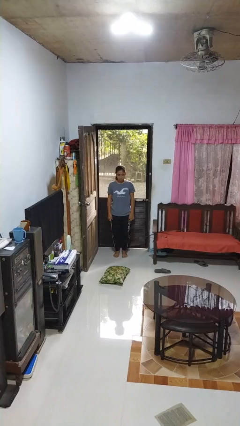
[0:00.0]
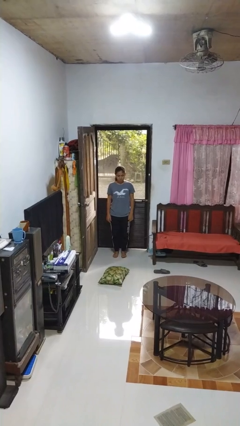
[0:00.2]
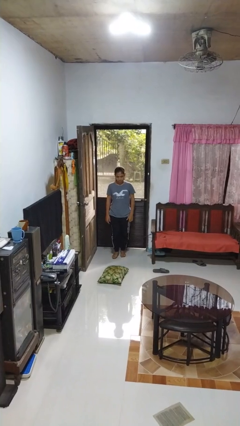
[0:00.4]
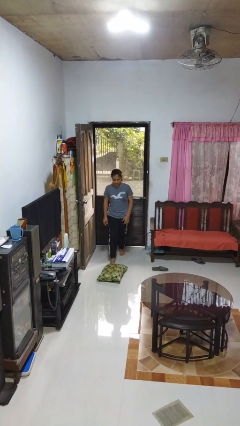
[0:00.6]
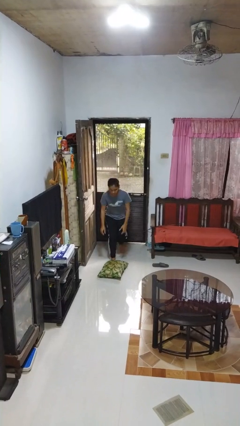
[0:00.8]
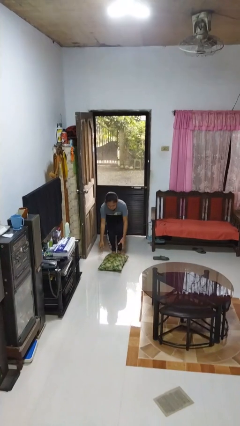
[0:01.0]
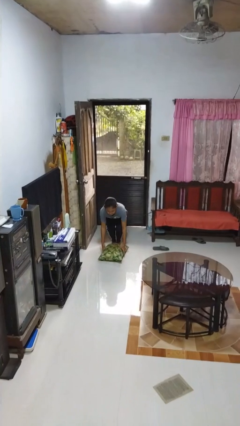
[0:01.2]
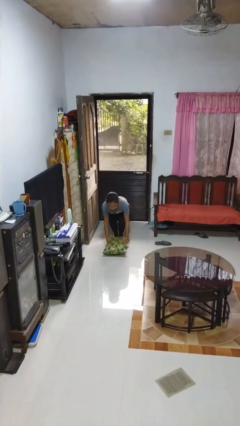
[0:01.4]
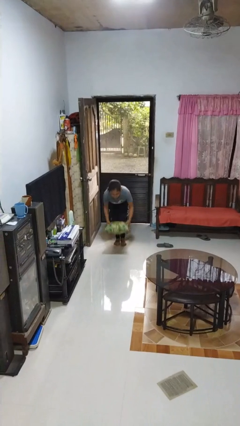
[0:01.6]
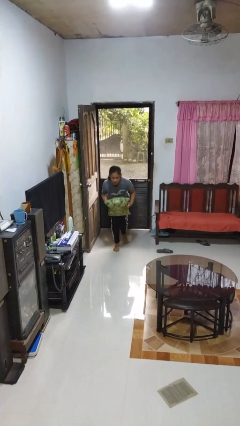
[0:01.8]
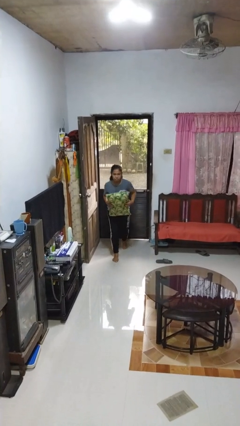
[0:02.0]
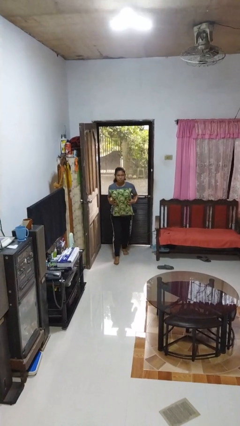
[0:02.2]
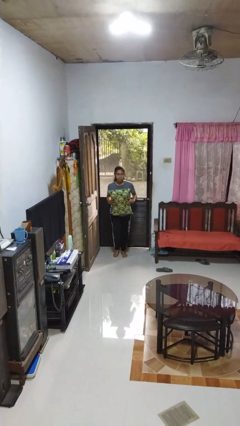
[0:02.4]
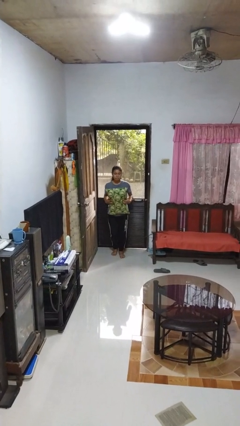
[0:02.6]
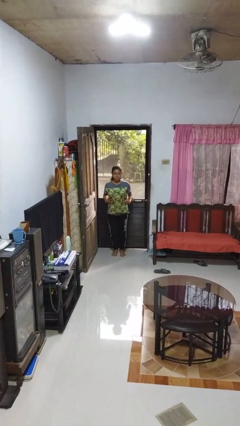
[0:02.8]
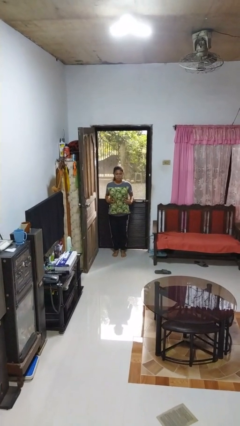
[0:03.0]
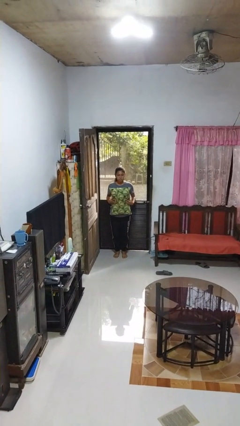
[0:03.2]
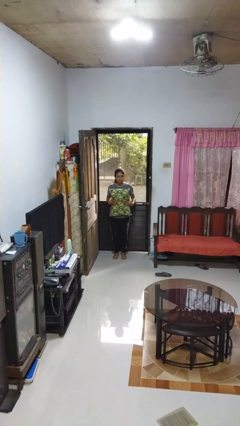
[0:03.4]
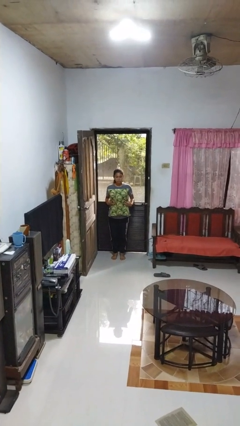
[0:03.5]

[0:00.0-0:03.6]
person picks up object from floor

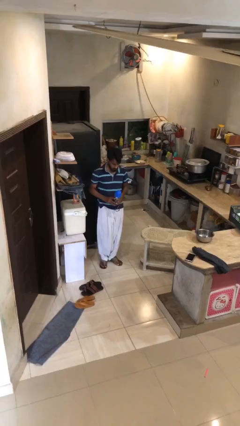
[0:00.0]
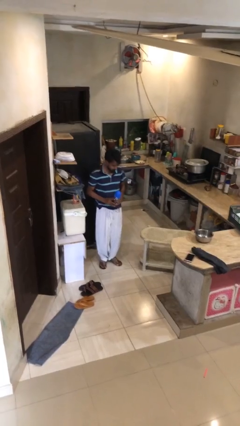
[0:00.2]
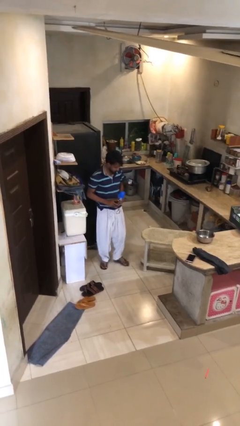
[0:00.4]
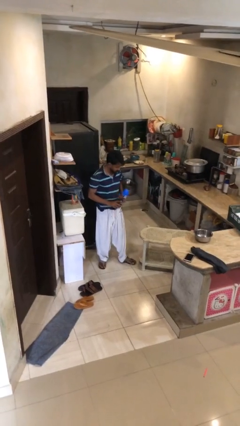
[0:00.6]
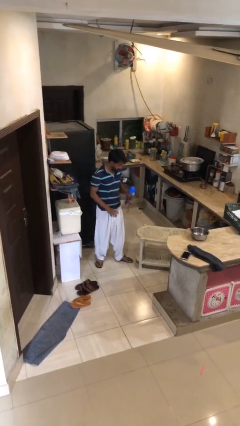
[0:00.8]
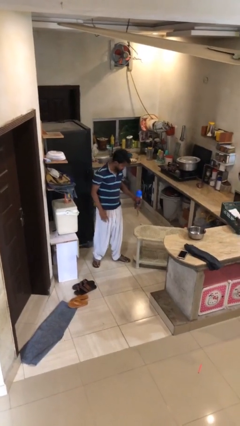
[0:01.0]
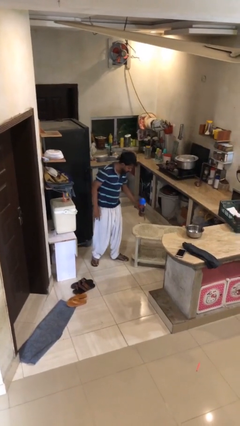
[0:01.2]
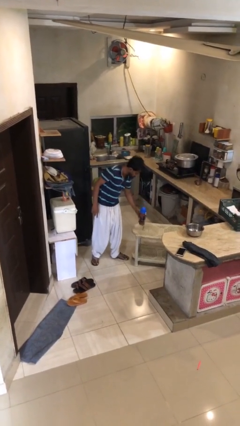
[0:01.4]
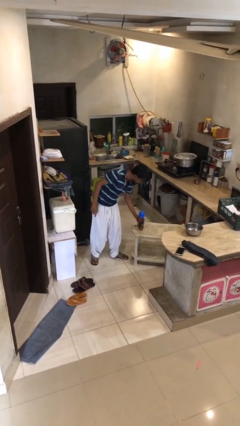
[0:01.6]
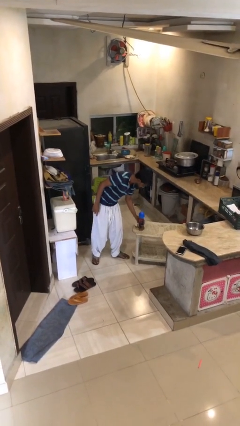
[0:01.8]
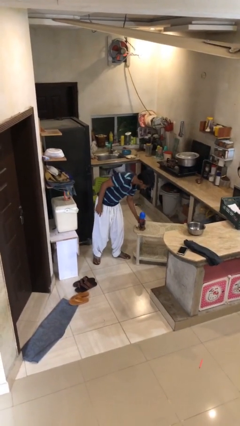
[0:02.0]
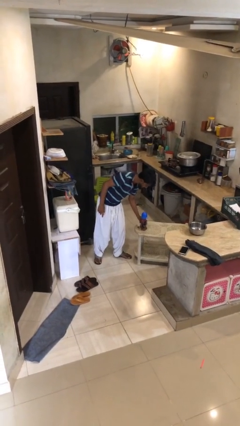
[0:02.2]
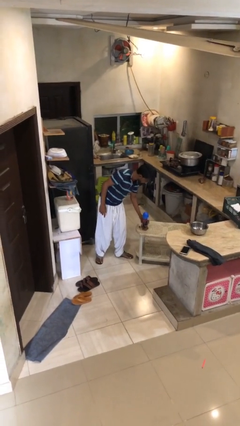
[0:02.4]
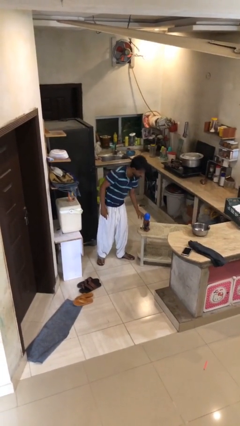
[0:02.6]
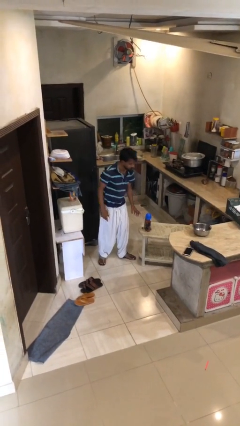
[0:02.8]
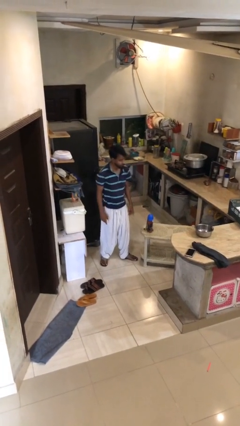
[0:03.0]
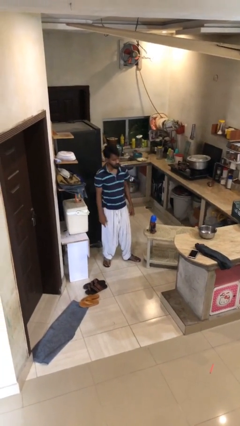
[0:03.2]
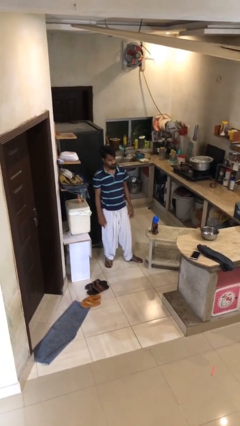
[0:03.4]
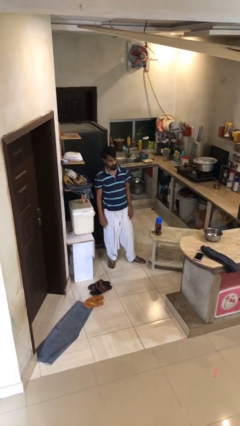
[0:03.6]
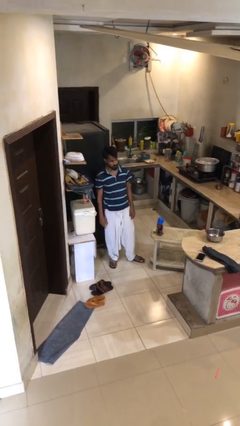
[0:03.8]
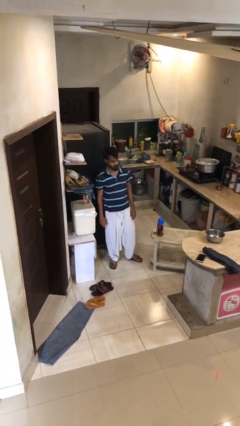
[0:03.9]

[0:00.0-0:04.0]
person puts down object on table

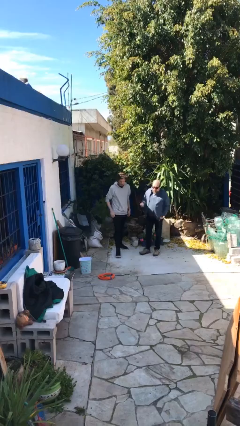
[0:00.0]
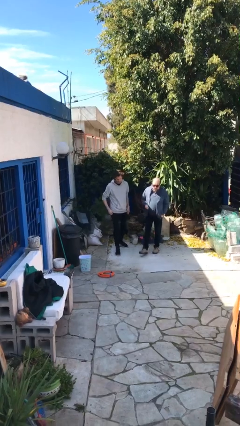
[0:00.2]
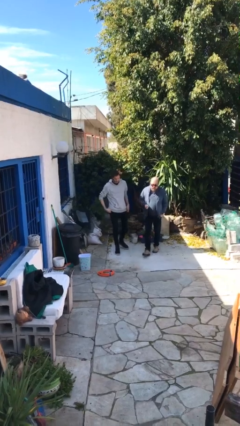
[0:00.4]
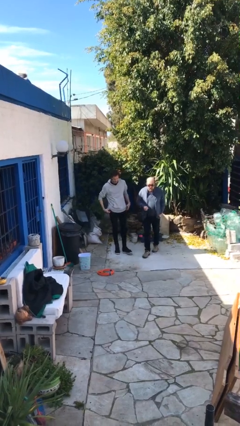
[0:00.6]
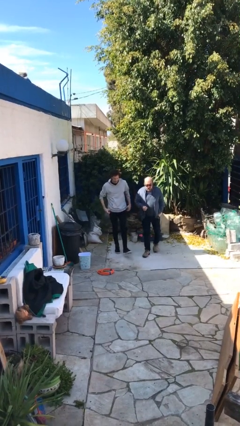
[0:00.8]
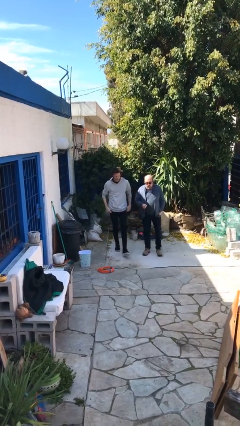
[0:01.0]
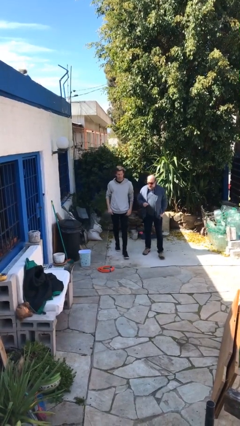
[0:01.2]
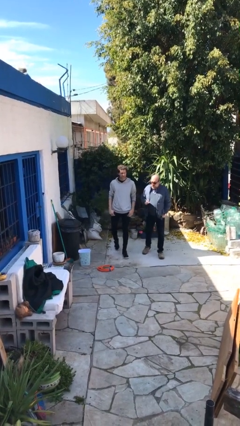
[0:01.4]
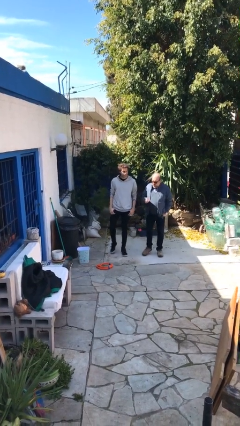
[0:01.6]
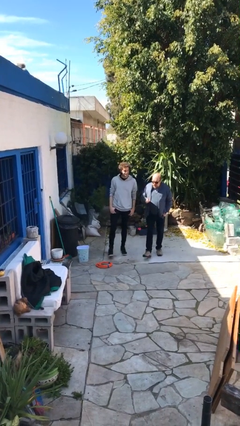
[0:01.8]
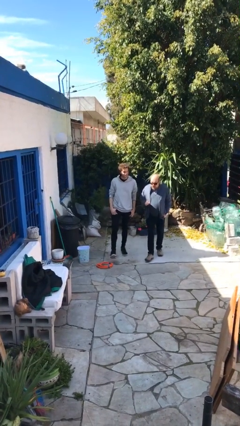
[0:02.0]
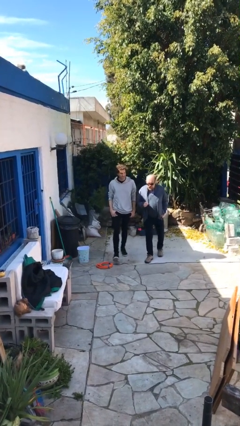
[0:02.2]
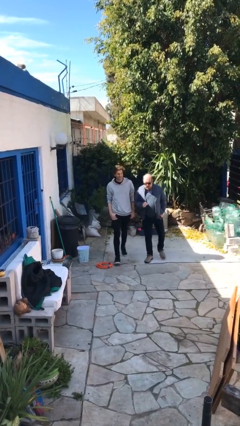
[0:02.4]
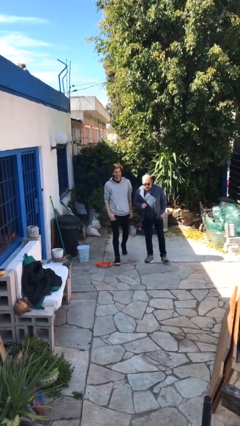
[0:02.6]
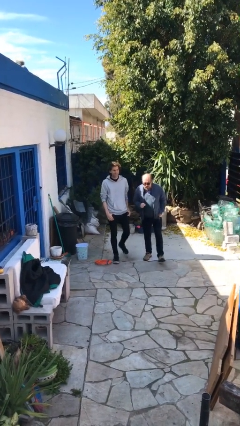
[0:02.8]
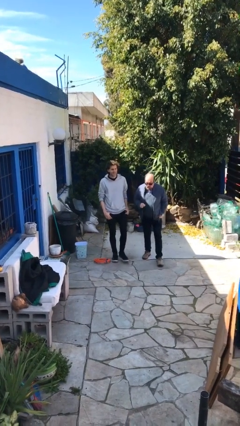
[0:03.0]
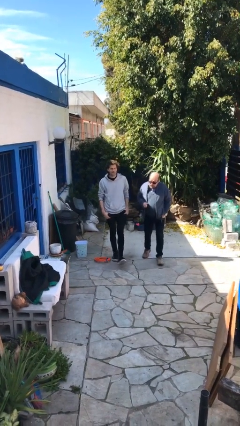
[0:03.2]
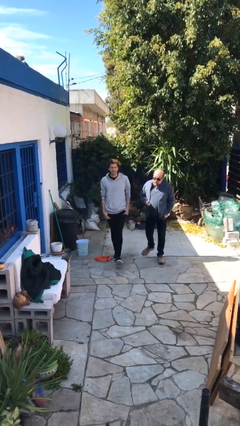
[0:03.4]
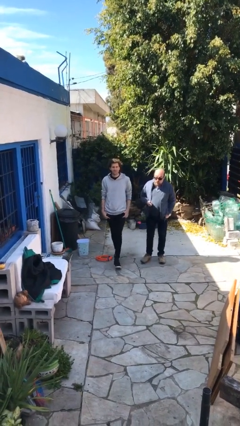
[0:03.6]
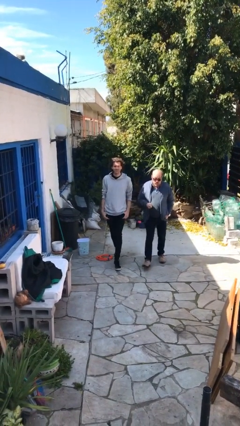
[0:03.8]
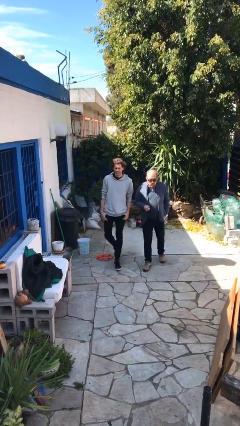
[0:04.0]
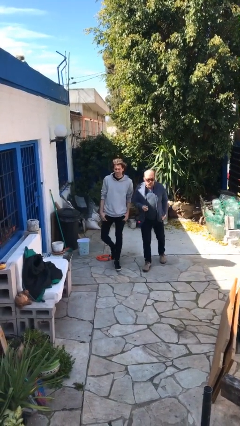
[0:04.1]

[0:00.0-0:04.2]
person talks to person

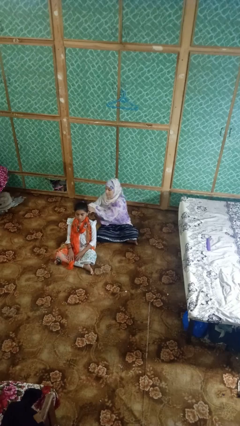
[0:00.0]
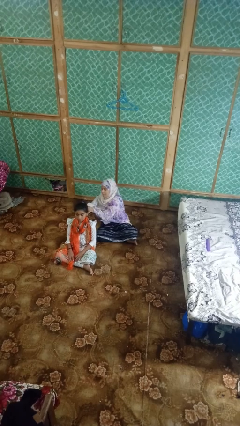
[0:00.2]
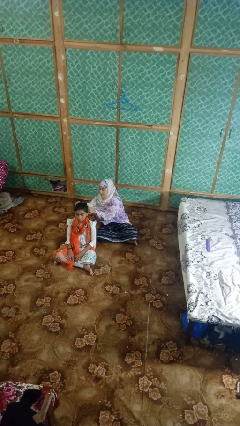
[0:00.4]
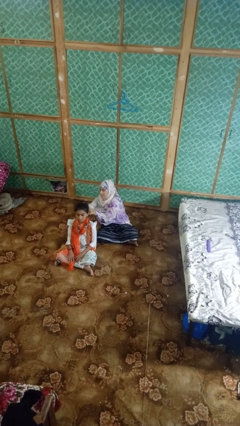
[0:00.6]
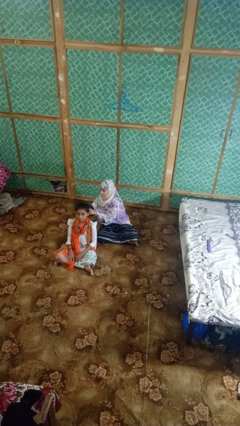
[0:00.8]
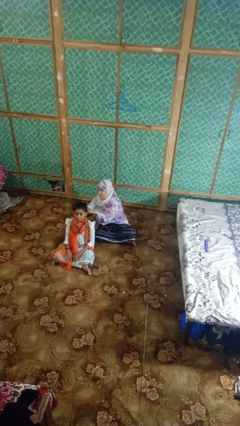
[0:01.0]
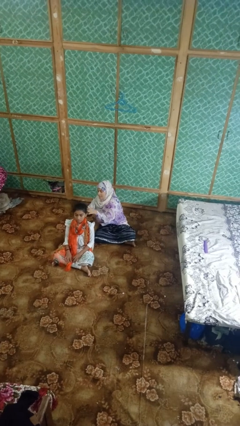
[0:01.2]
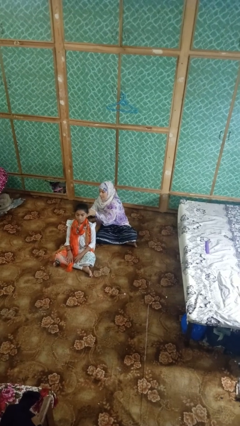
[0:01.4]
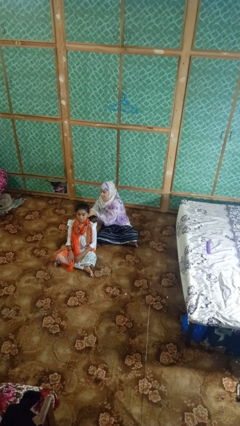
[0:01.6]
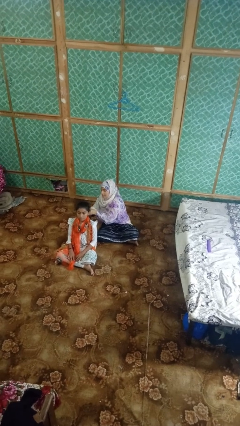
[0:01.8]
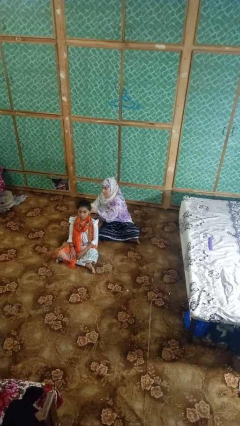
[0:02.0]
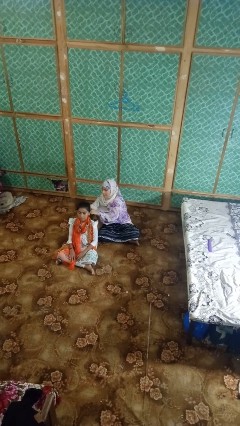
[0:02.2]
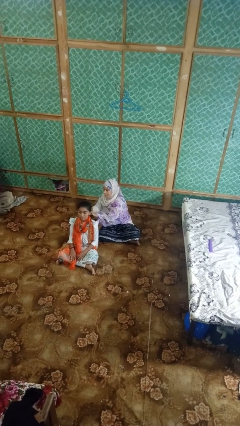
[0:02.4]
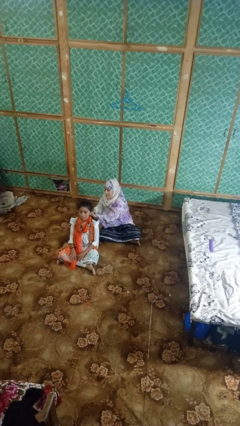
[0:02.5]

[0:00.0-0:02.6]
person braids hair of person

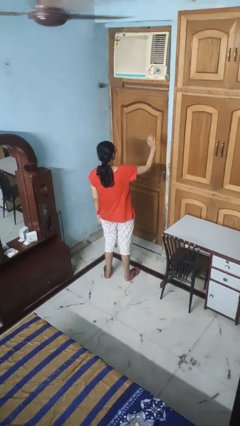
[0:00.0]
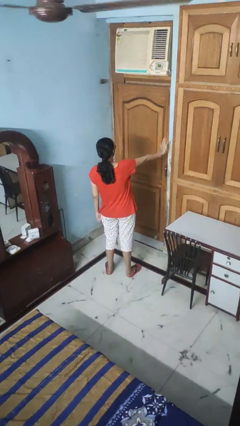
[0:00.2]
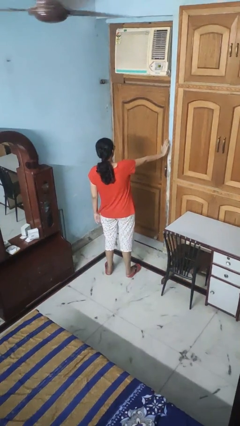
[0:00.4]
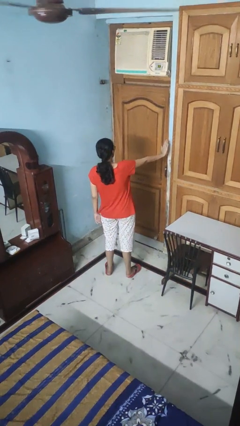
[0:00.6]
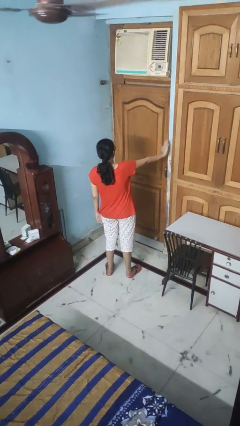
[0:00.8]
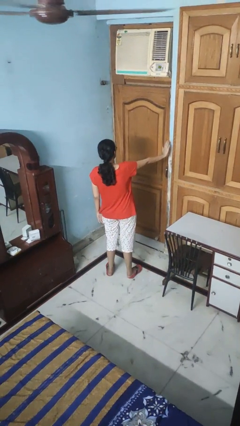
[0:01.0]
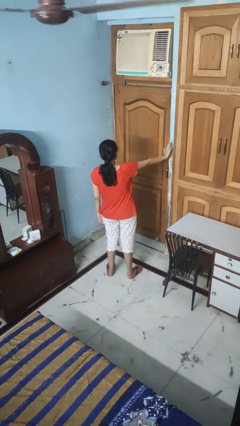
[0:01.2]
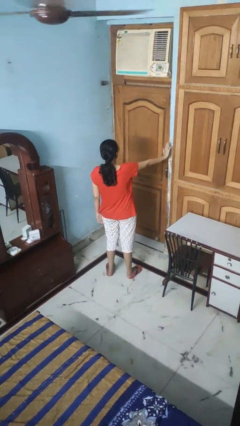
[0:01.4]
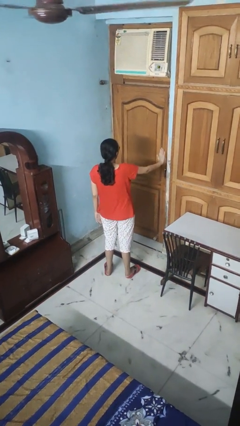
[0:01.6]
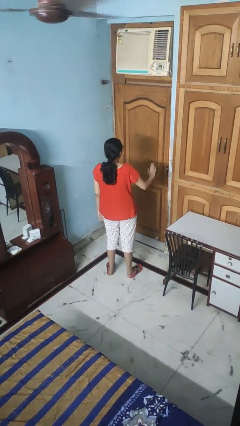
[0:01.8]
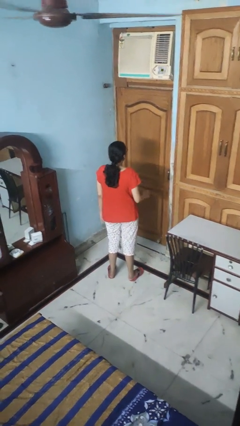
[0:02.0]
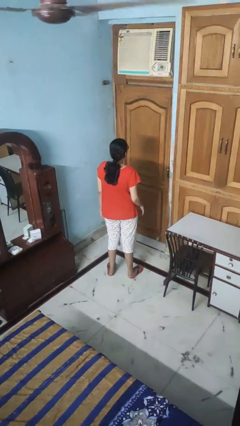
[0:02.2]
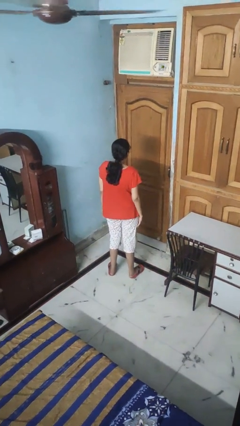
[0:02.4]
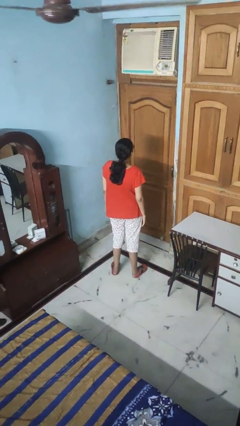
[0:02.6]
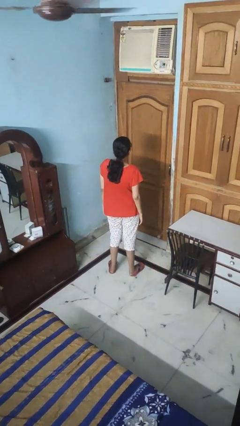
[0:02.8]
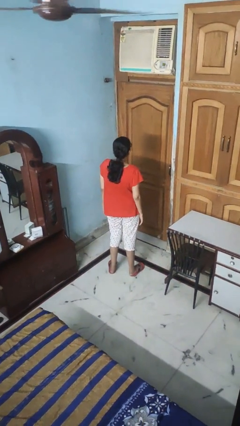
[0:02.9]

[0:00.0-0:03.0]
person gestures stop

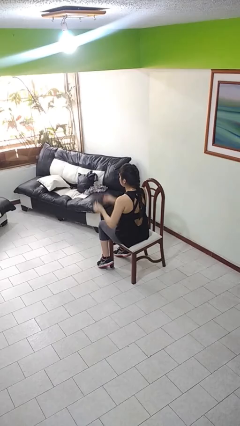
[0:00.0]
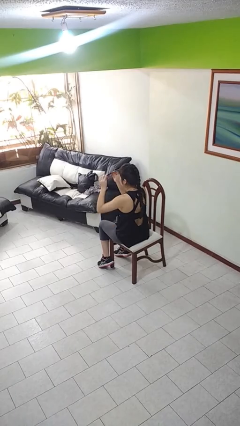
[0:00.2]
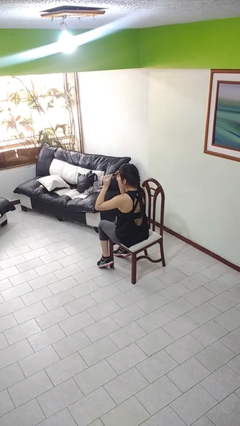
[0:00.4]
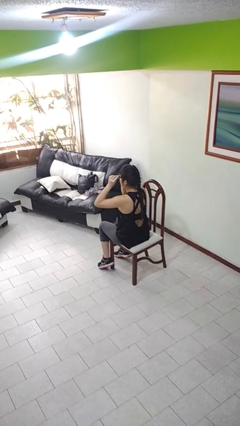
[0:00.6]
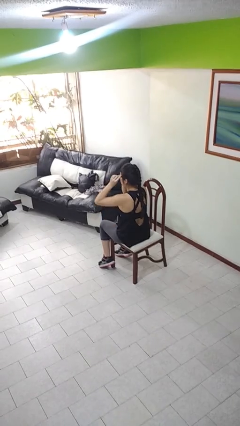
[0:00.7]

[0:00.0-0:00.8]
person puts on glasses
